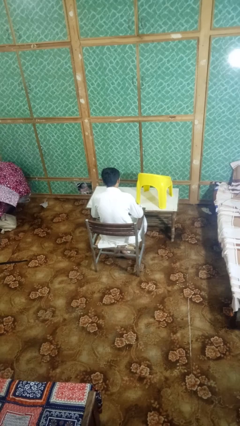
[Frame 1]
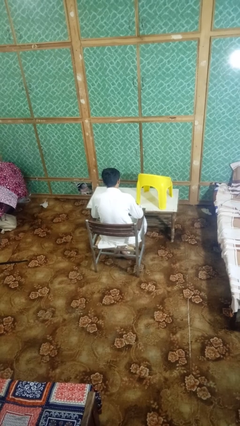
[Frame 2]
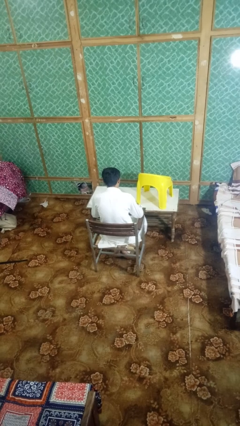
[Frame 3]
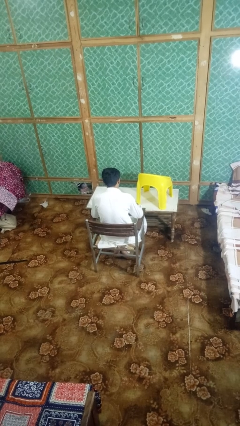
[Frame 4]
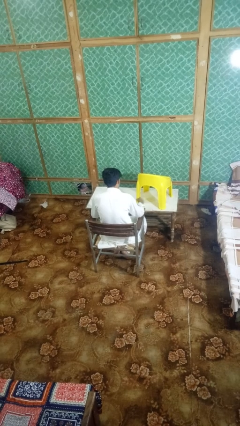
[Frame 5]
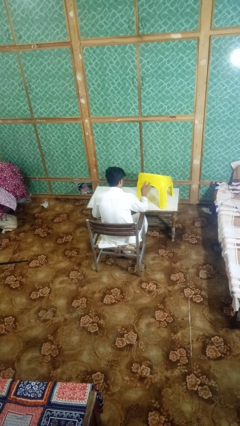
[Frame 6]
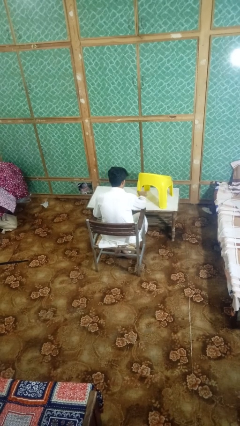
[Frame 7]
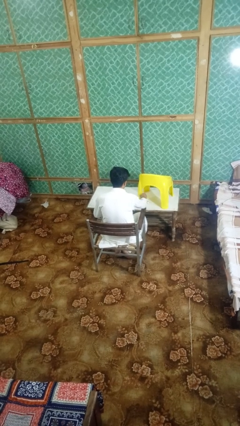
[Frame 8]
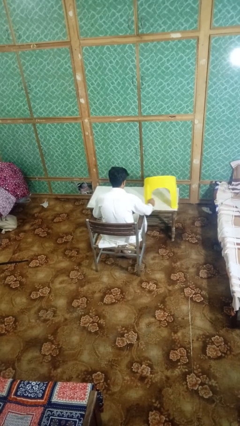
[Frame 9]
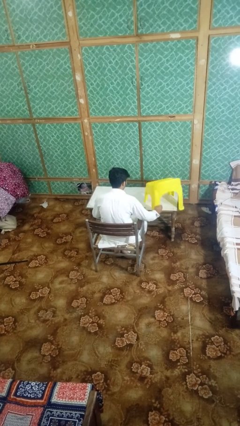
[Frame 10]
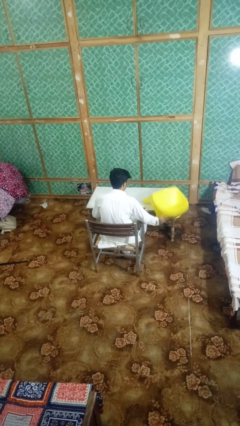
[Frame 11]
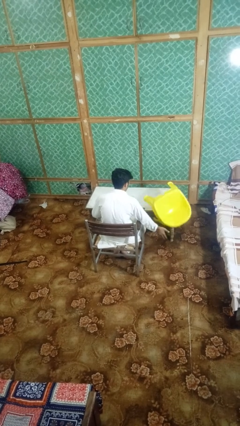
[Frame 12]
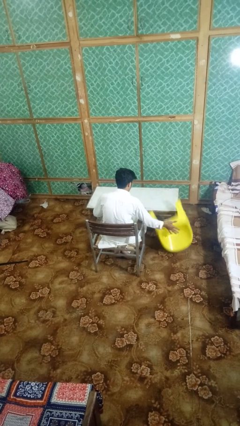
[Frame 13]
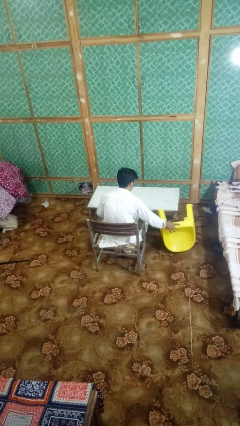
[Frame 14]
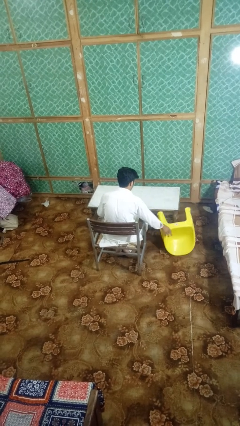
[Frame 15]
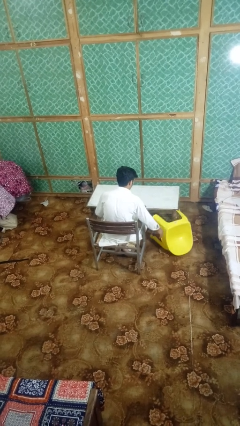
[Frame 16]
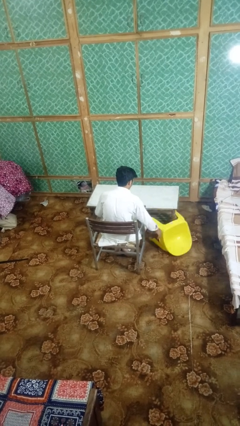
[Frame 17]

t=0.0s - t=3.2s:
person knocks over furniture

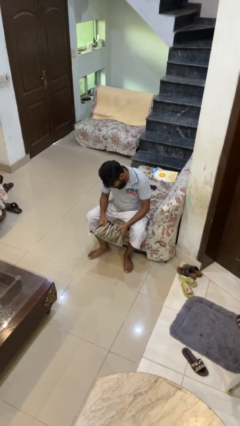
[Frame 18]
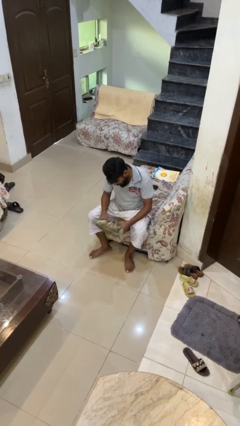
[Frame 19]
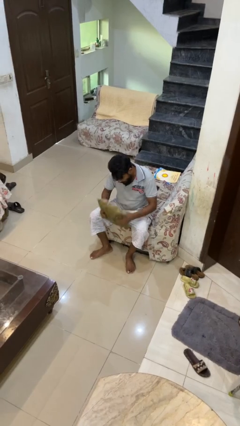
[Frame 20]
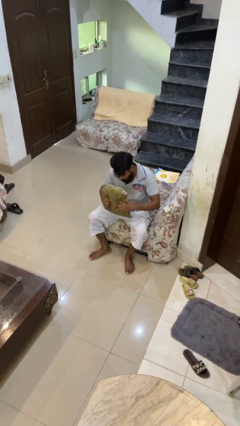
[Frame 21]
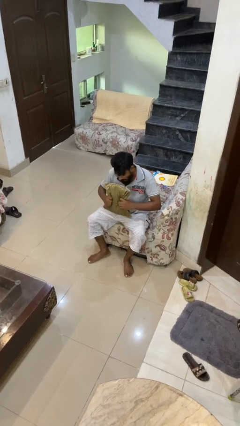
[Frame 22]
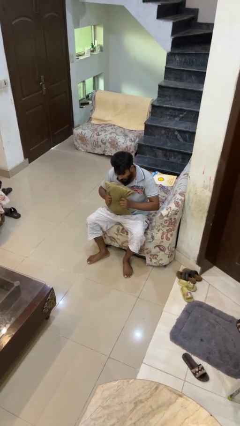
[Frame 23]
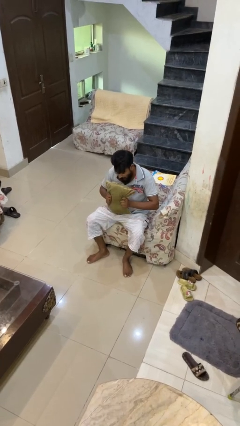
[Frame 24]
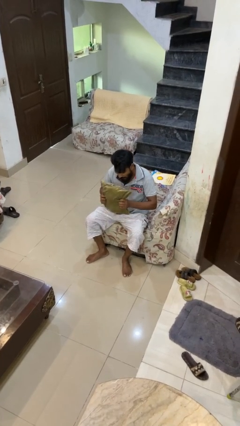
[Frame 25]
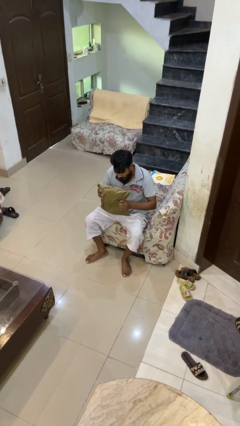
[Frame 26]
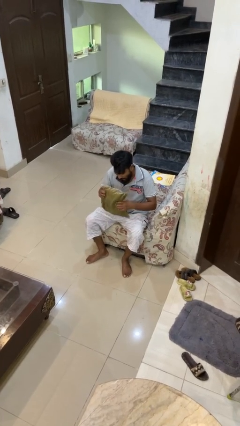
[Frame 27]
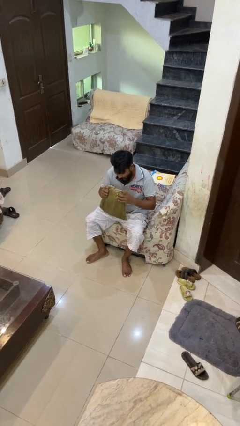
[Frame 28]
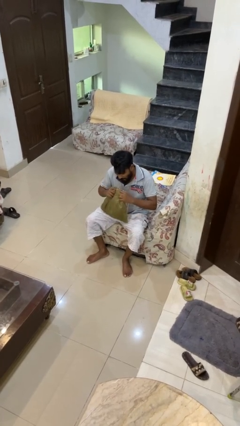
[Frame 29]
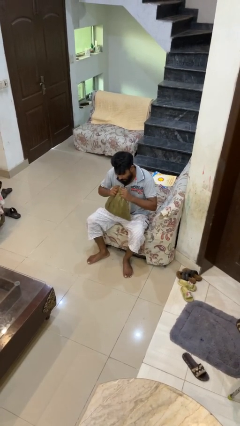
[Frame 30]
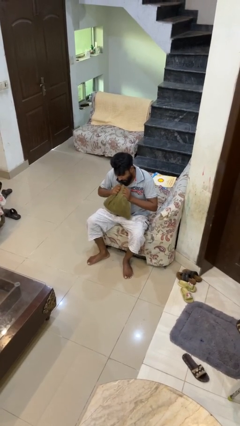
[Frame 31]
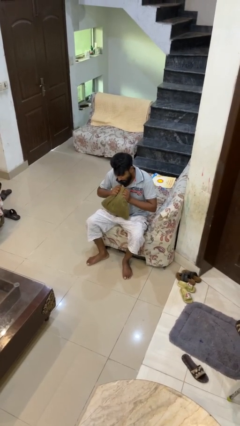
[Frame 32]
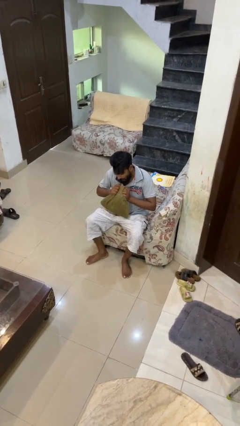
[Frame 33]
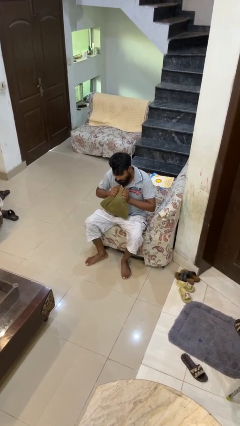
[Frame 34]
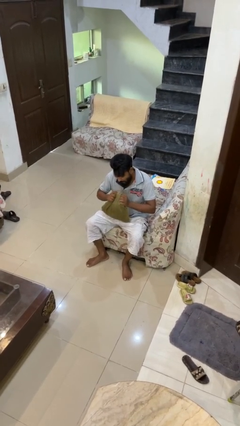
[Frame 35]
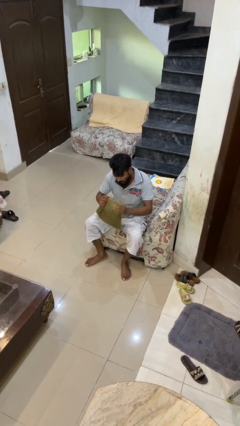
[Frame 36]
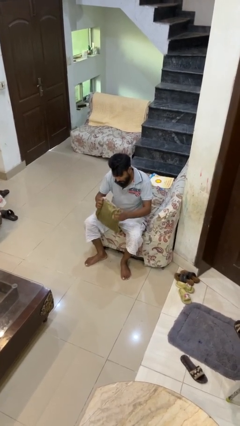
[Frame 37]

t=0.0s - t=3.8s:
person squeezes object

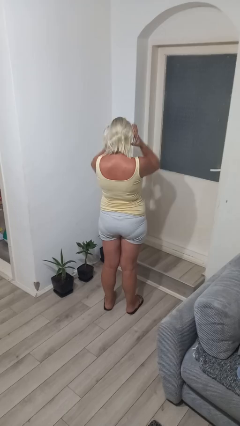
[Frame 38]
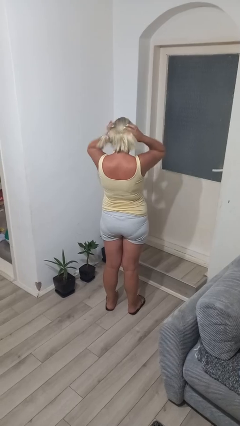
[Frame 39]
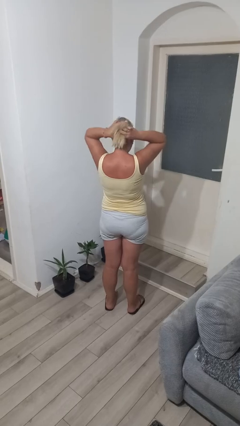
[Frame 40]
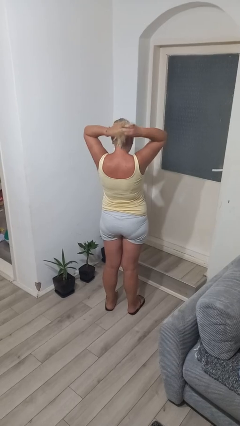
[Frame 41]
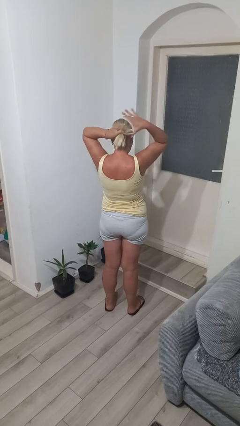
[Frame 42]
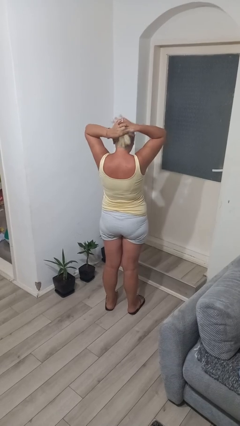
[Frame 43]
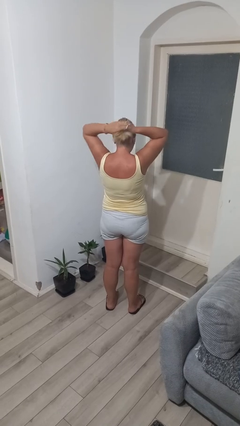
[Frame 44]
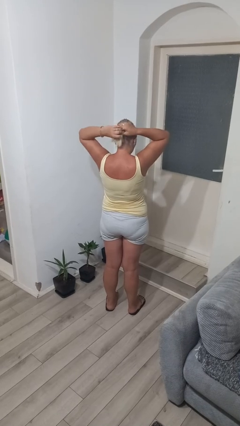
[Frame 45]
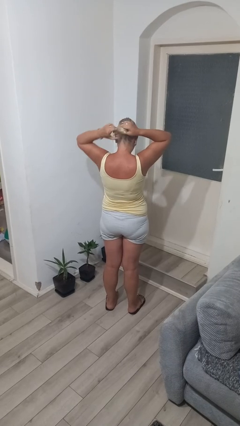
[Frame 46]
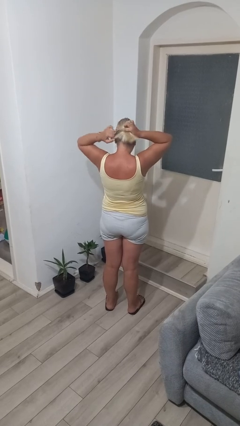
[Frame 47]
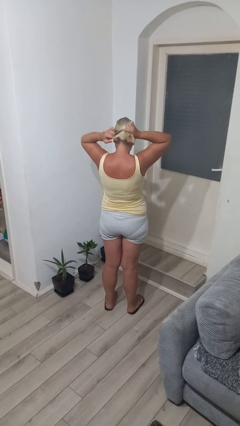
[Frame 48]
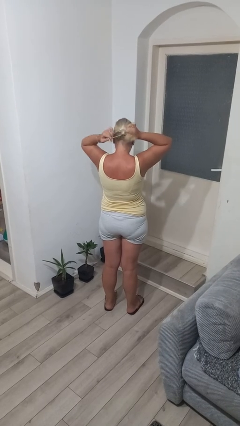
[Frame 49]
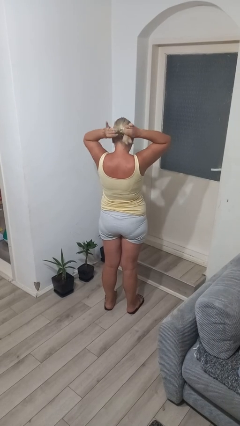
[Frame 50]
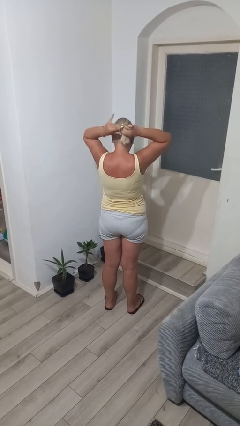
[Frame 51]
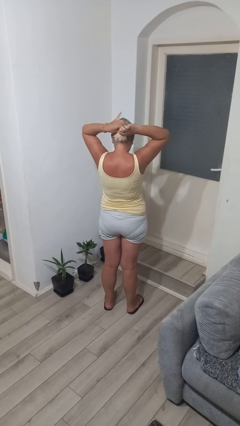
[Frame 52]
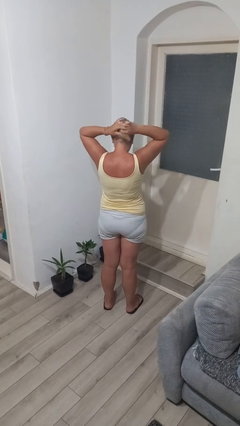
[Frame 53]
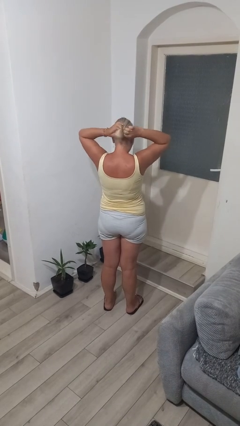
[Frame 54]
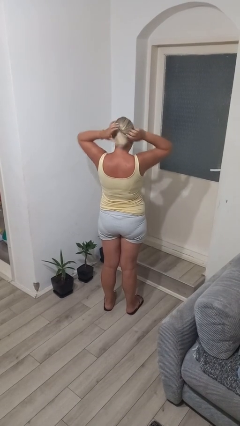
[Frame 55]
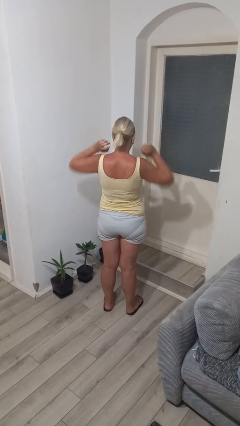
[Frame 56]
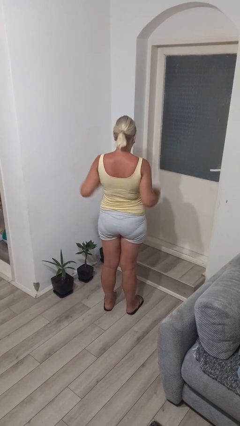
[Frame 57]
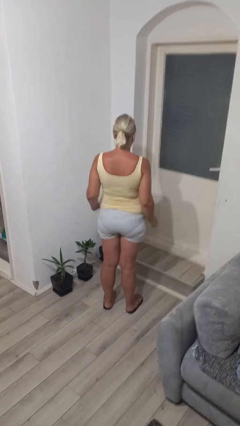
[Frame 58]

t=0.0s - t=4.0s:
person puts hair in ponytail

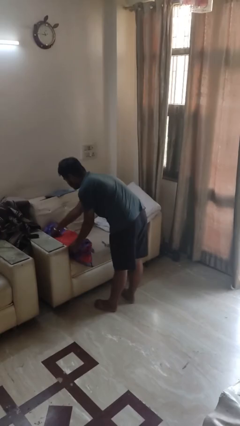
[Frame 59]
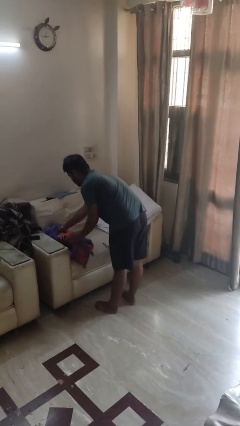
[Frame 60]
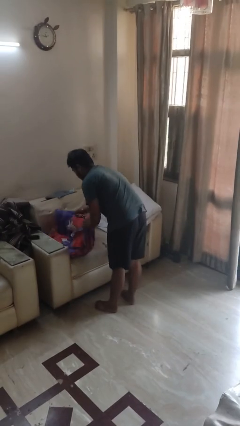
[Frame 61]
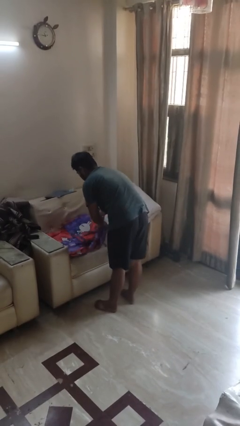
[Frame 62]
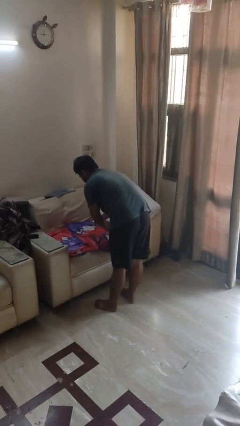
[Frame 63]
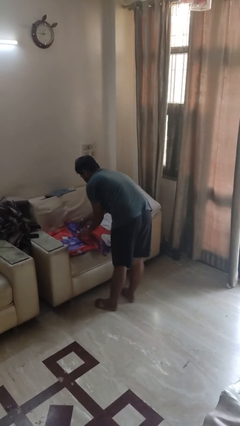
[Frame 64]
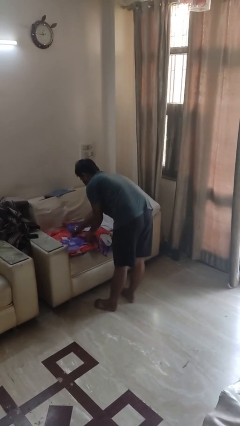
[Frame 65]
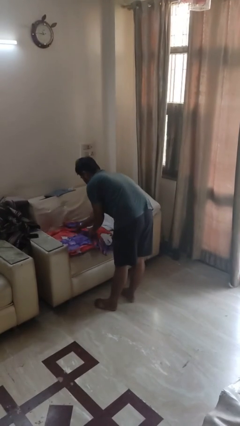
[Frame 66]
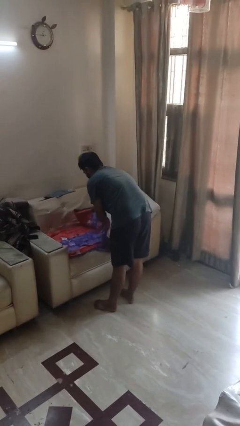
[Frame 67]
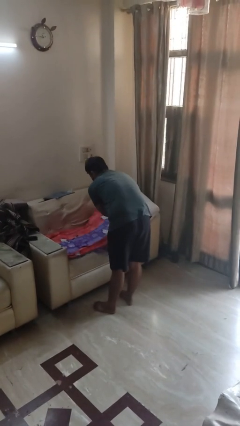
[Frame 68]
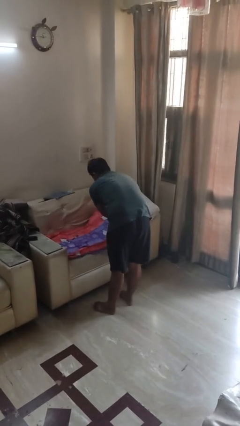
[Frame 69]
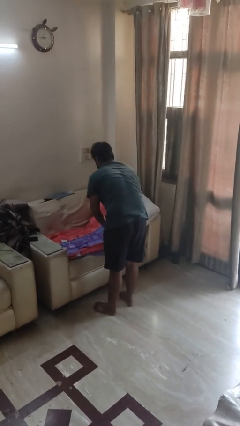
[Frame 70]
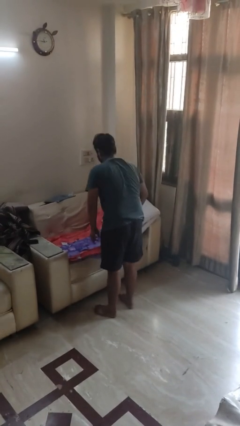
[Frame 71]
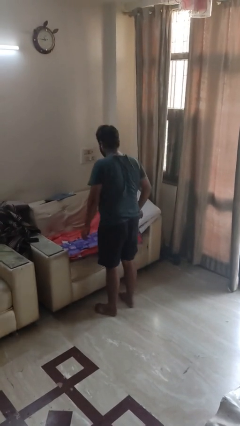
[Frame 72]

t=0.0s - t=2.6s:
person unfolds blanket

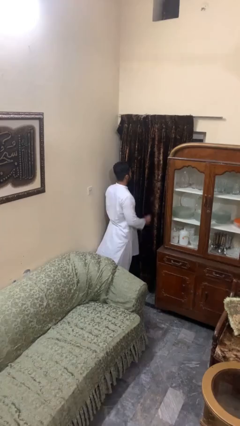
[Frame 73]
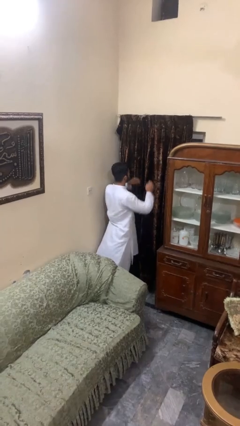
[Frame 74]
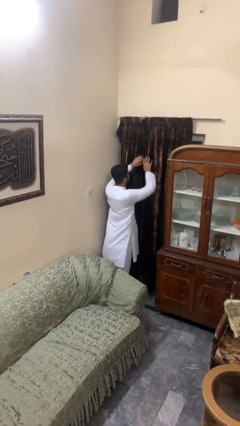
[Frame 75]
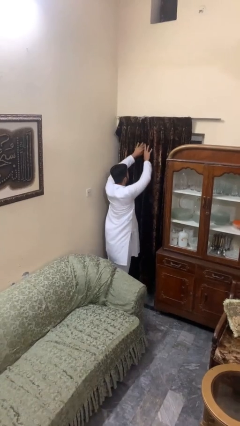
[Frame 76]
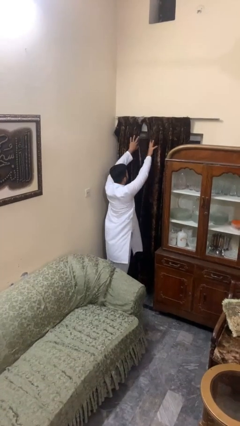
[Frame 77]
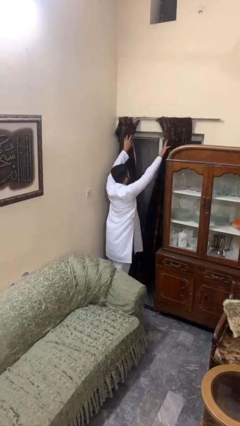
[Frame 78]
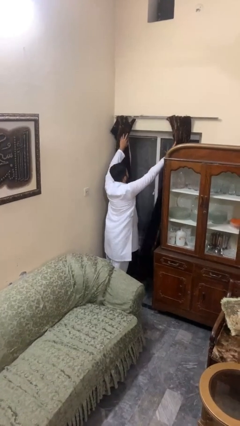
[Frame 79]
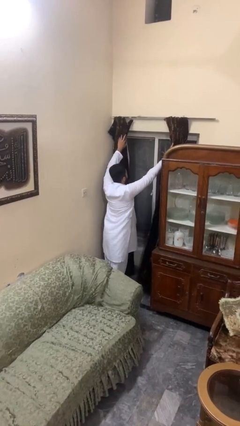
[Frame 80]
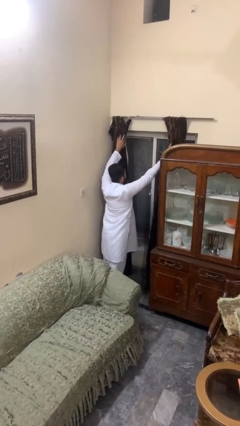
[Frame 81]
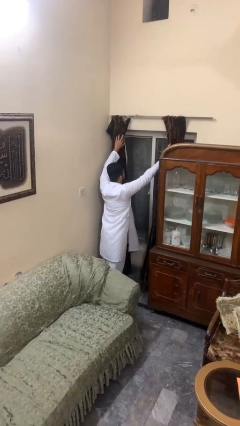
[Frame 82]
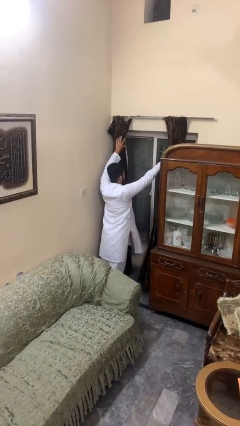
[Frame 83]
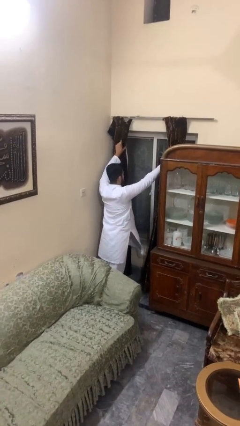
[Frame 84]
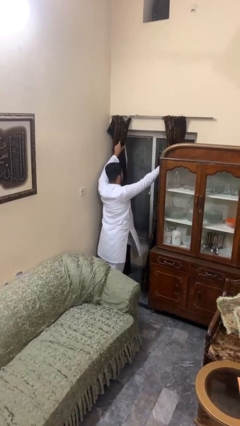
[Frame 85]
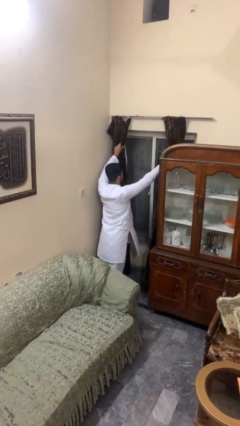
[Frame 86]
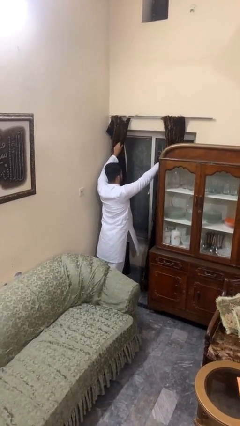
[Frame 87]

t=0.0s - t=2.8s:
person opens curtains

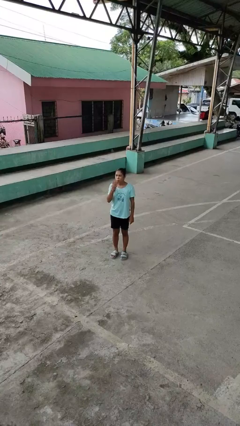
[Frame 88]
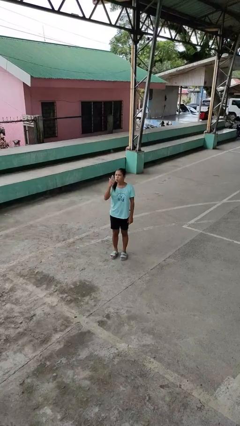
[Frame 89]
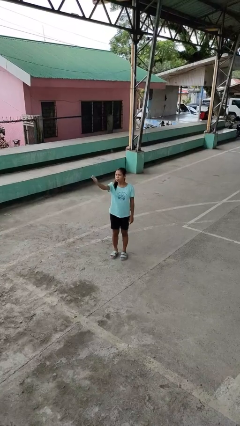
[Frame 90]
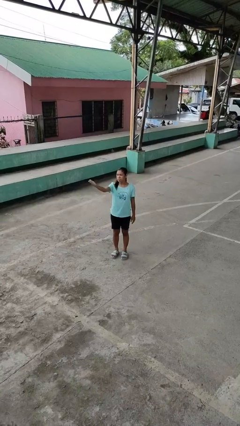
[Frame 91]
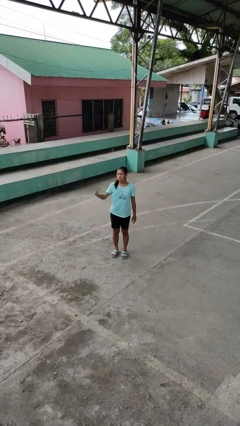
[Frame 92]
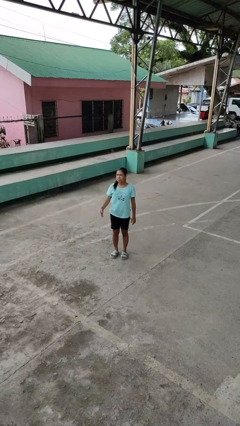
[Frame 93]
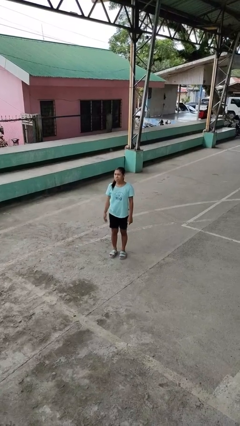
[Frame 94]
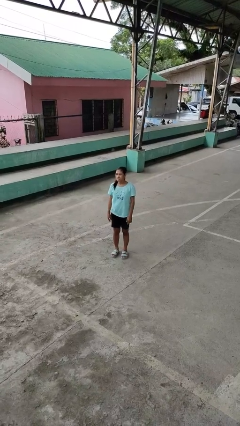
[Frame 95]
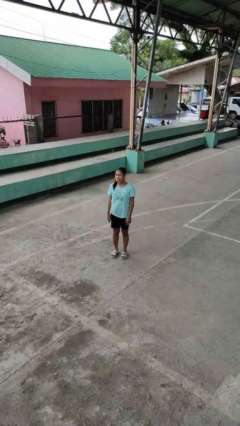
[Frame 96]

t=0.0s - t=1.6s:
person gestures blow kiss
